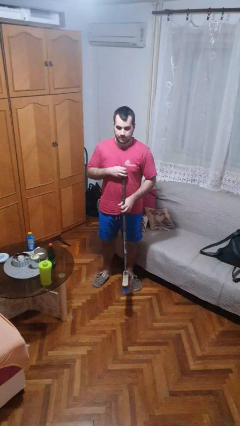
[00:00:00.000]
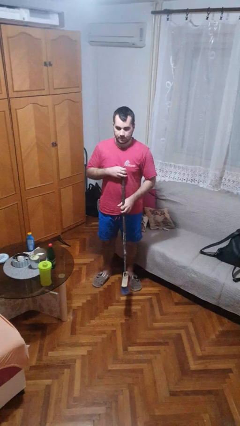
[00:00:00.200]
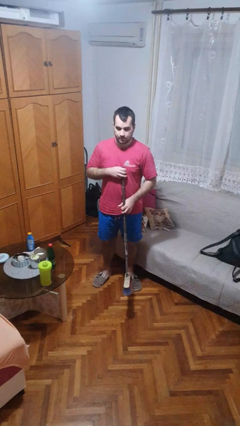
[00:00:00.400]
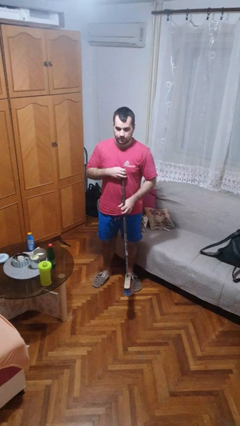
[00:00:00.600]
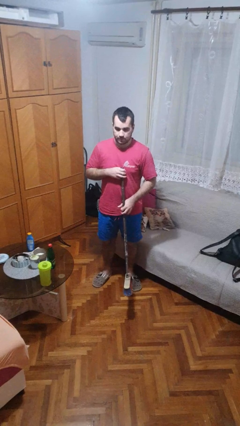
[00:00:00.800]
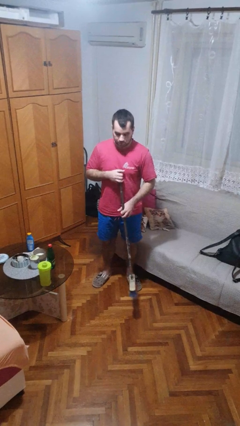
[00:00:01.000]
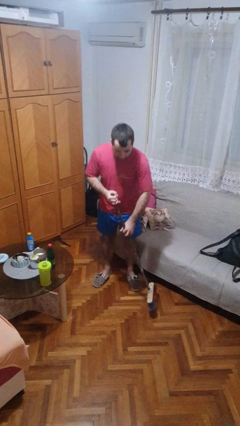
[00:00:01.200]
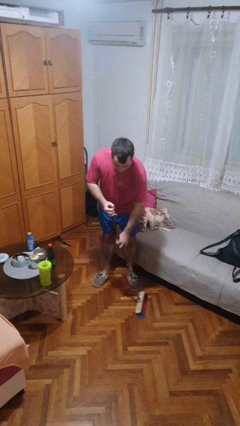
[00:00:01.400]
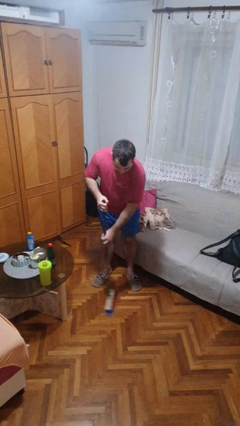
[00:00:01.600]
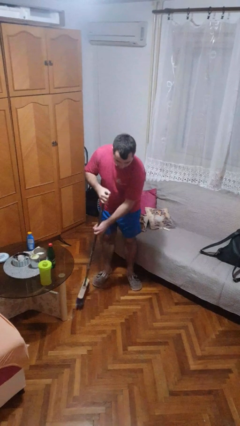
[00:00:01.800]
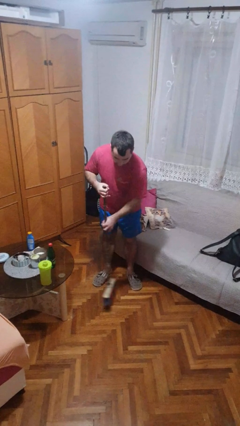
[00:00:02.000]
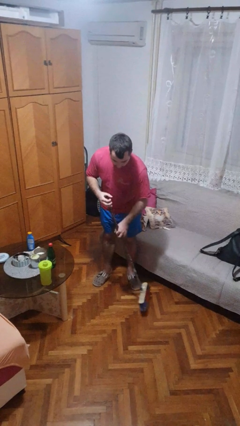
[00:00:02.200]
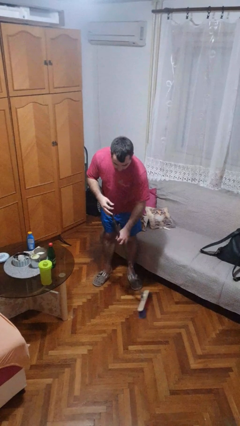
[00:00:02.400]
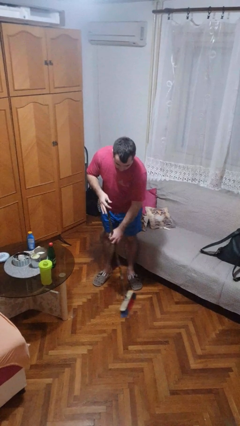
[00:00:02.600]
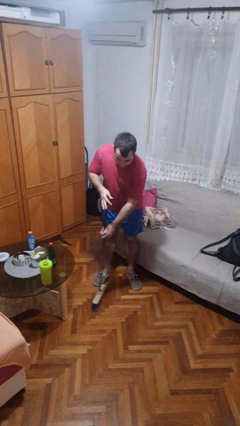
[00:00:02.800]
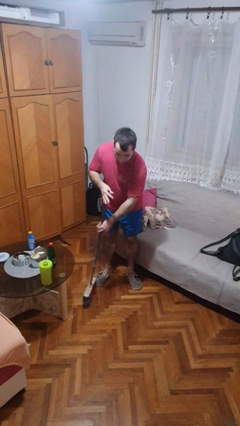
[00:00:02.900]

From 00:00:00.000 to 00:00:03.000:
person sweeps floor

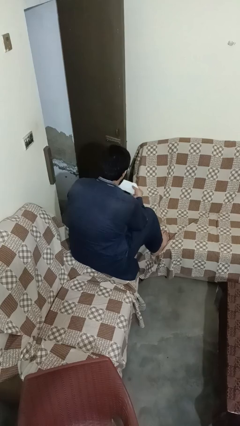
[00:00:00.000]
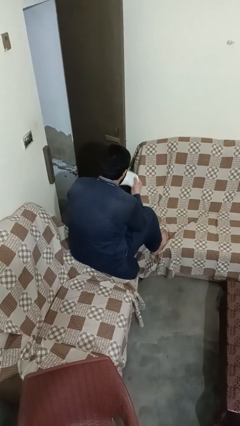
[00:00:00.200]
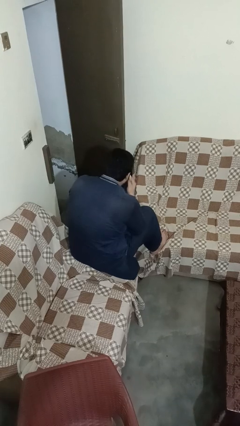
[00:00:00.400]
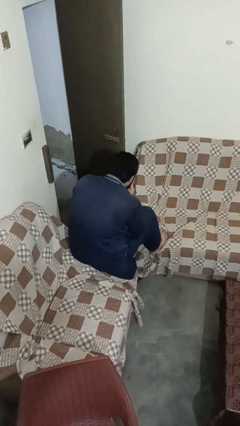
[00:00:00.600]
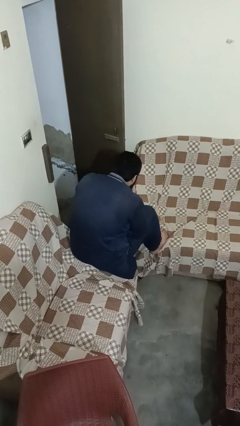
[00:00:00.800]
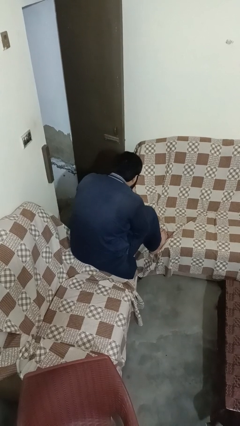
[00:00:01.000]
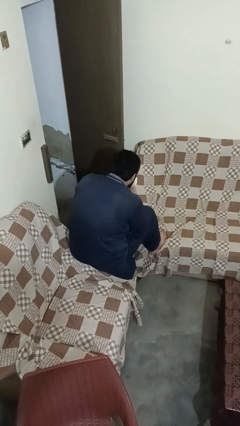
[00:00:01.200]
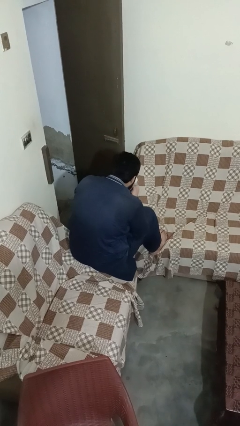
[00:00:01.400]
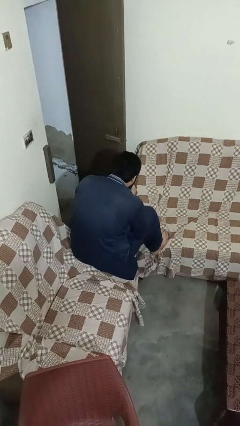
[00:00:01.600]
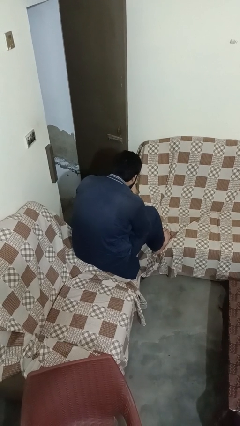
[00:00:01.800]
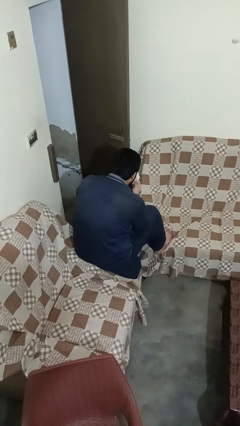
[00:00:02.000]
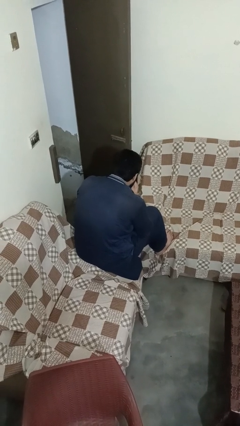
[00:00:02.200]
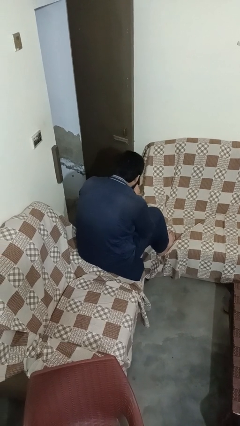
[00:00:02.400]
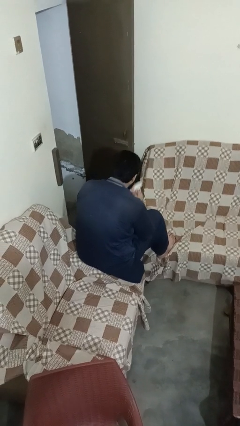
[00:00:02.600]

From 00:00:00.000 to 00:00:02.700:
person blows nose

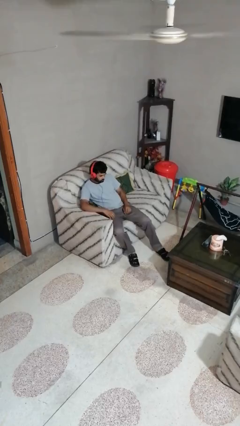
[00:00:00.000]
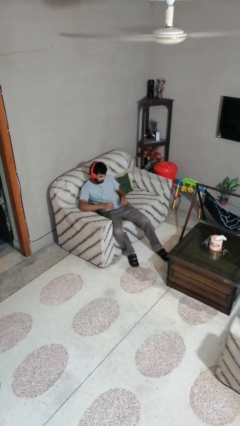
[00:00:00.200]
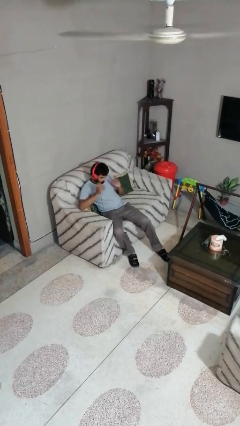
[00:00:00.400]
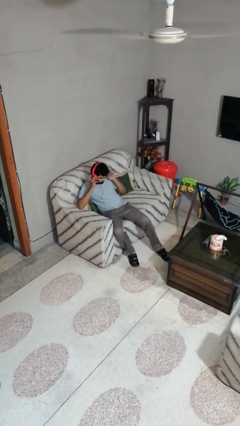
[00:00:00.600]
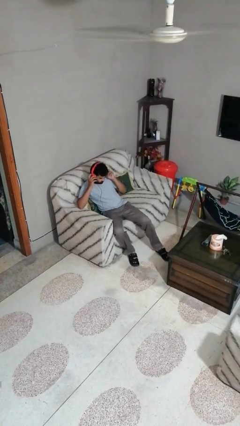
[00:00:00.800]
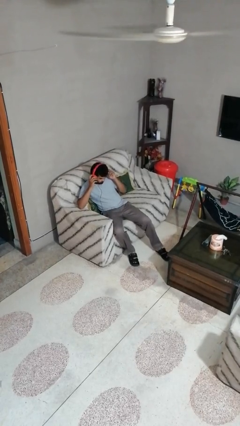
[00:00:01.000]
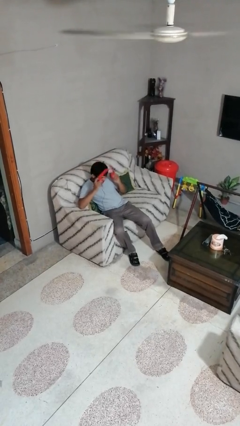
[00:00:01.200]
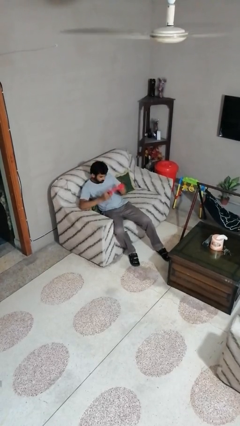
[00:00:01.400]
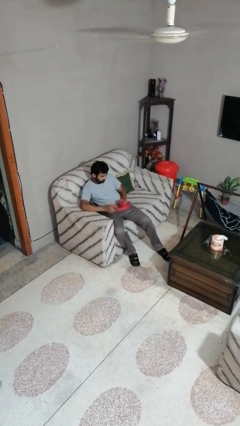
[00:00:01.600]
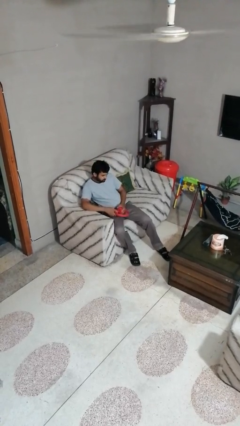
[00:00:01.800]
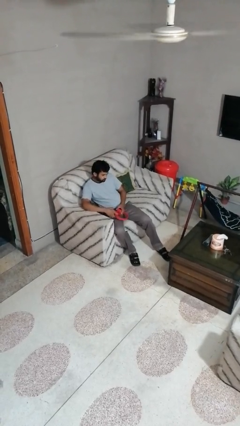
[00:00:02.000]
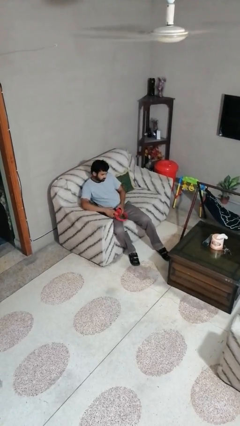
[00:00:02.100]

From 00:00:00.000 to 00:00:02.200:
person takes off headphones

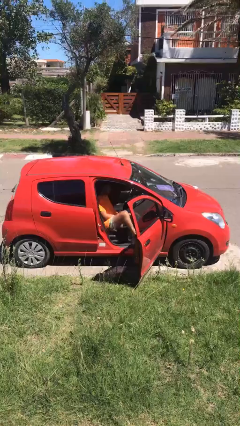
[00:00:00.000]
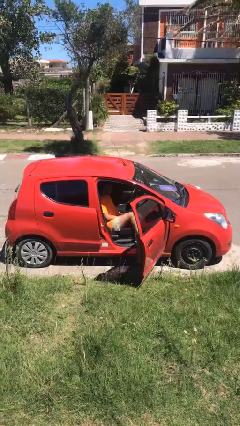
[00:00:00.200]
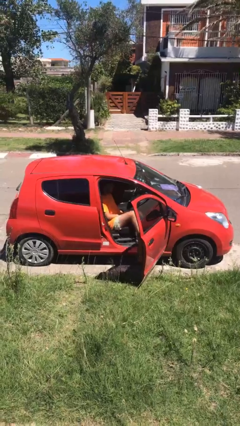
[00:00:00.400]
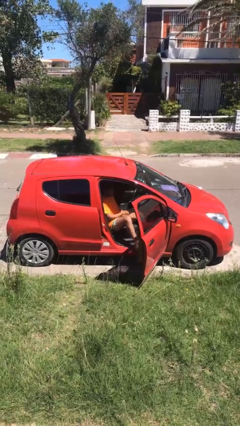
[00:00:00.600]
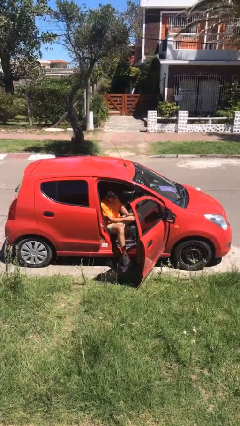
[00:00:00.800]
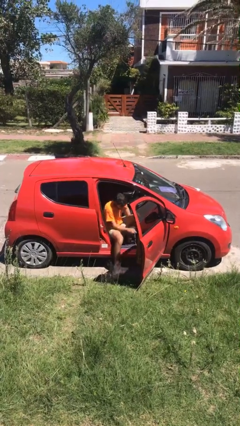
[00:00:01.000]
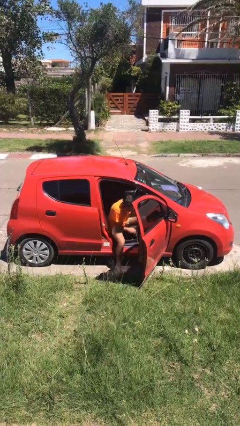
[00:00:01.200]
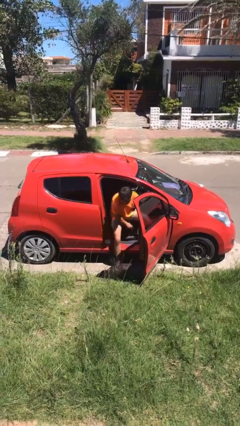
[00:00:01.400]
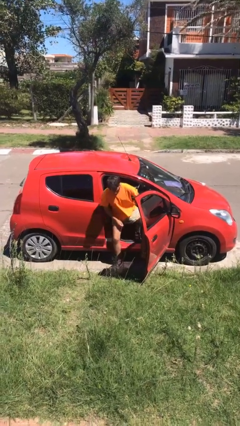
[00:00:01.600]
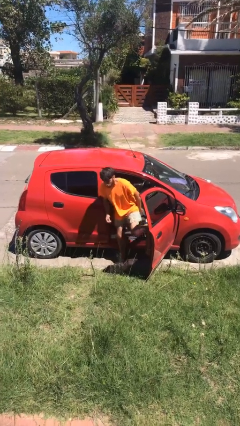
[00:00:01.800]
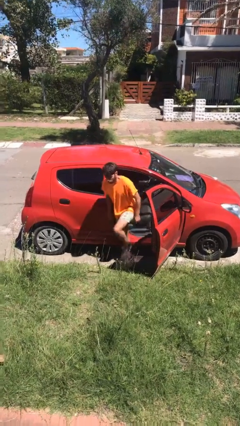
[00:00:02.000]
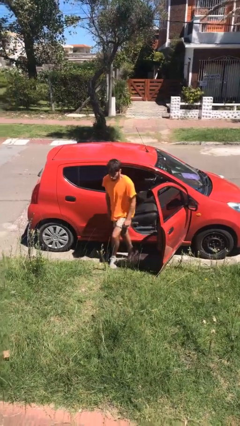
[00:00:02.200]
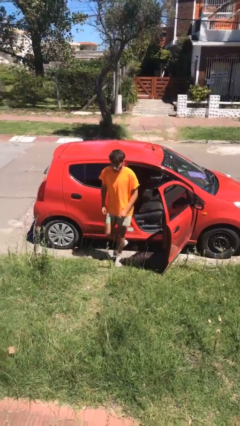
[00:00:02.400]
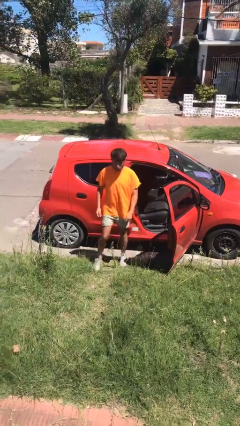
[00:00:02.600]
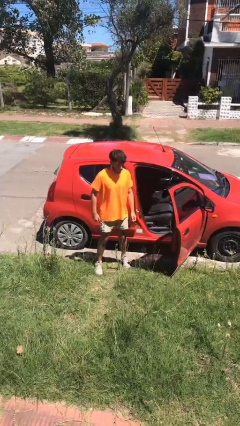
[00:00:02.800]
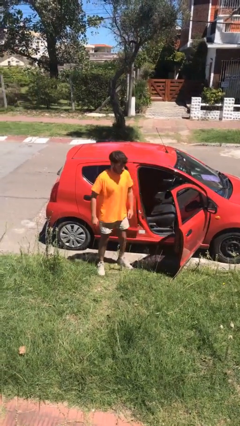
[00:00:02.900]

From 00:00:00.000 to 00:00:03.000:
person exits car

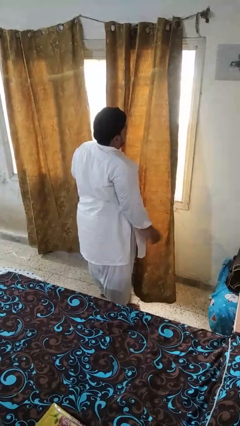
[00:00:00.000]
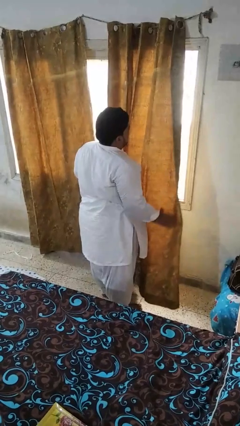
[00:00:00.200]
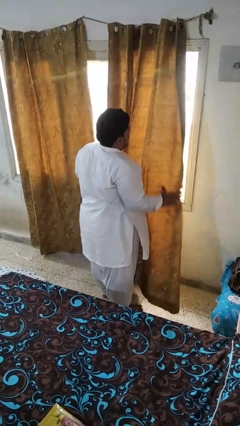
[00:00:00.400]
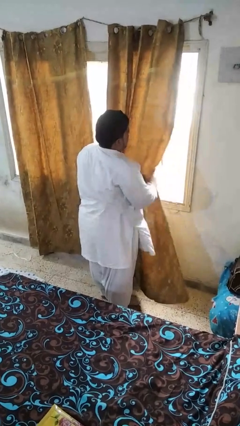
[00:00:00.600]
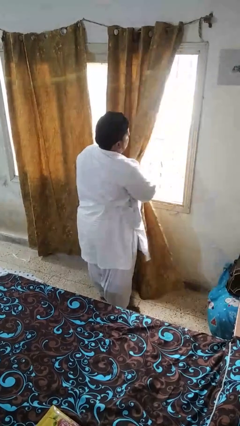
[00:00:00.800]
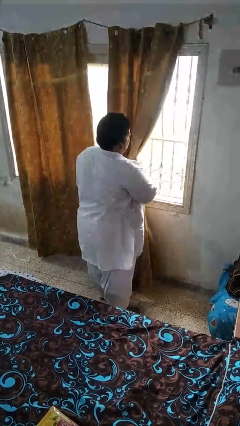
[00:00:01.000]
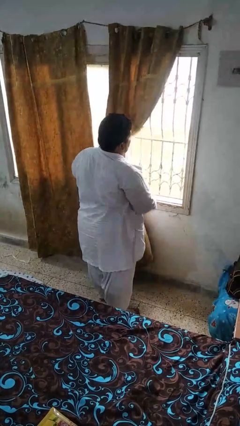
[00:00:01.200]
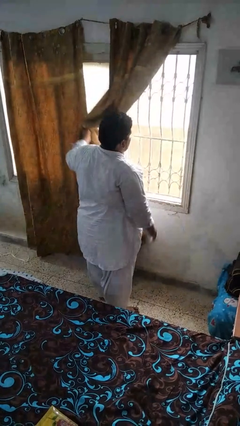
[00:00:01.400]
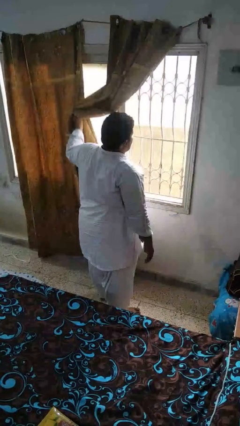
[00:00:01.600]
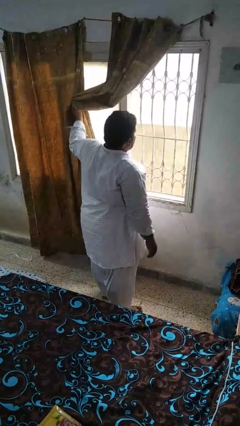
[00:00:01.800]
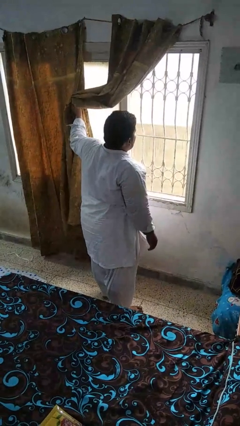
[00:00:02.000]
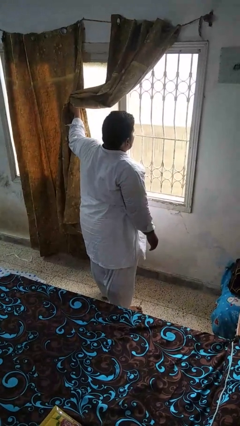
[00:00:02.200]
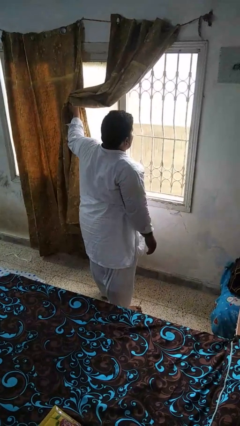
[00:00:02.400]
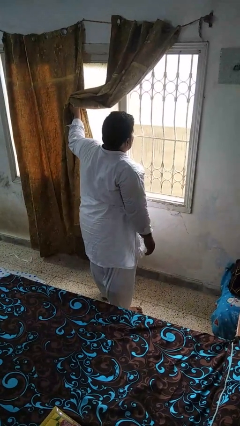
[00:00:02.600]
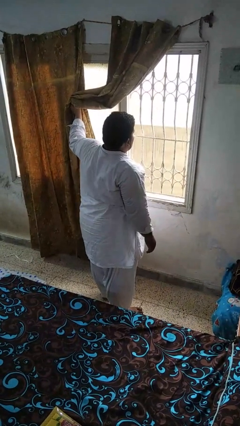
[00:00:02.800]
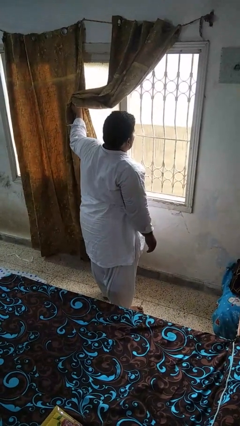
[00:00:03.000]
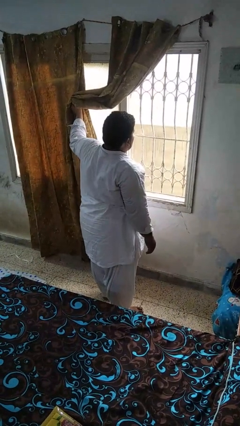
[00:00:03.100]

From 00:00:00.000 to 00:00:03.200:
person opens curtains

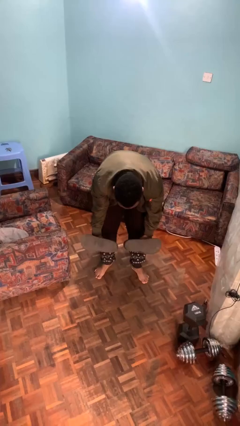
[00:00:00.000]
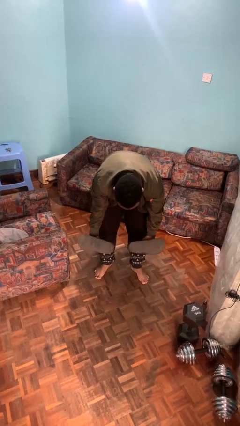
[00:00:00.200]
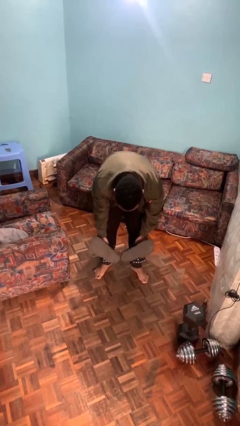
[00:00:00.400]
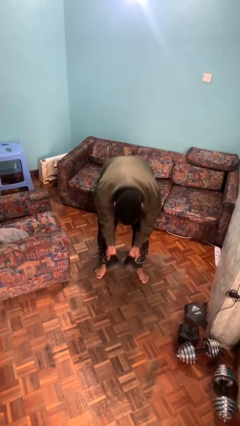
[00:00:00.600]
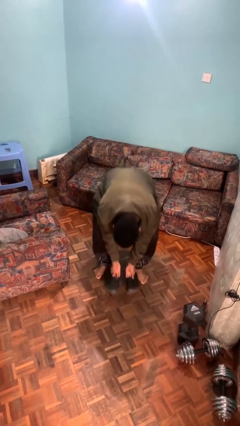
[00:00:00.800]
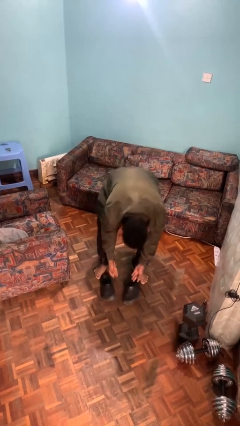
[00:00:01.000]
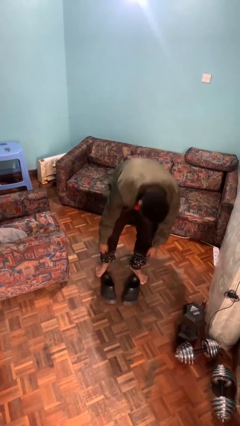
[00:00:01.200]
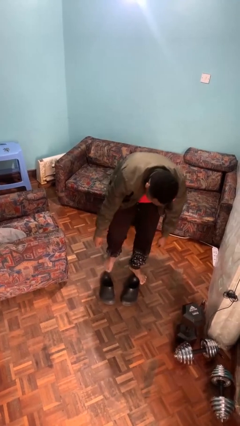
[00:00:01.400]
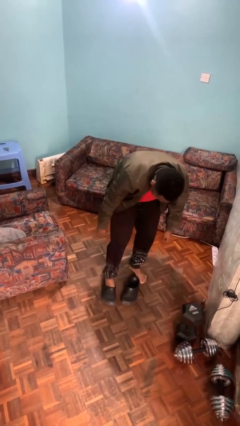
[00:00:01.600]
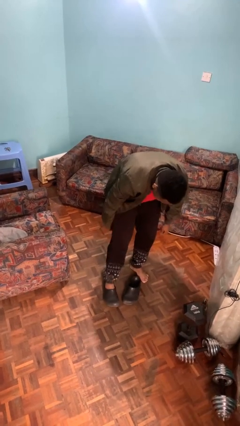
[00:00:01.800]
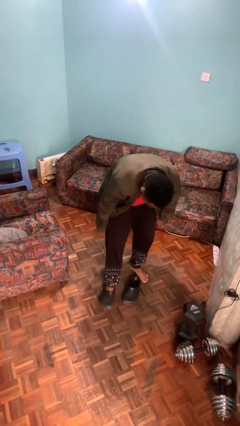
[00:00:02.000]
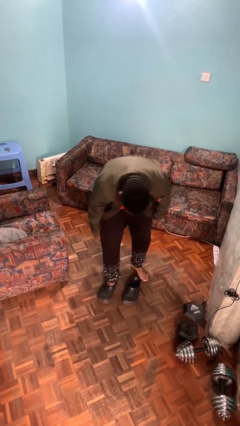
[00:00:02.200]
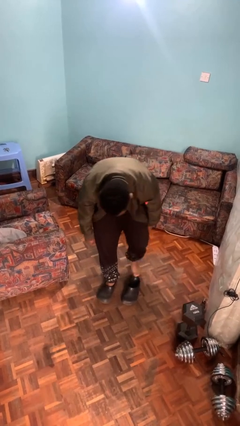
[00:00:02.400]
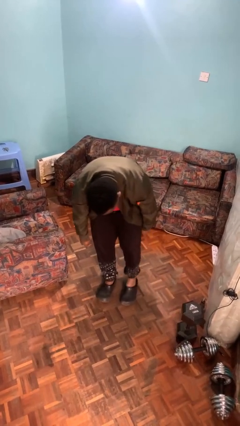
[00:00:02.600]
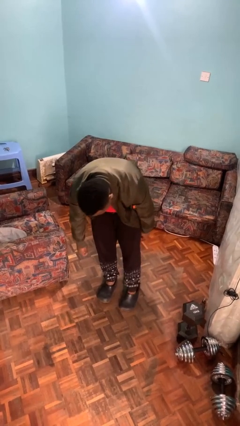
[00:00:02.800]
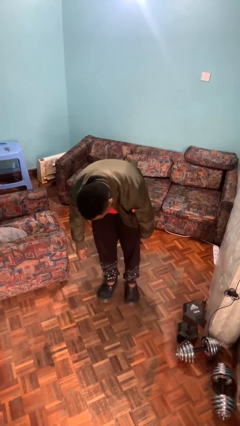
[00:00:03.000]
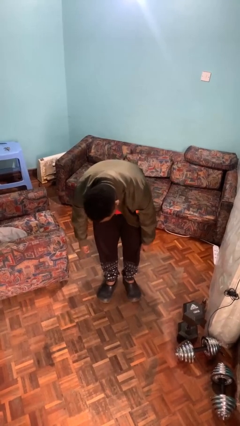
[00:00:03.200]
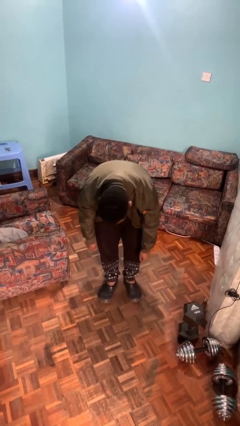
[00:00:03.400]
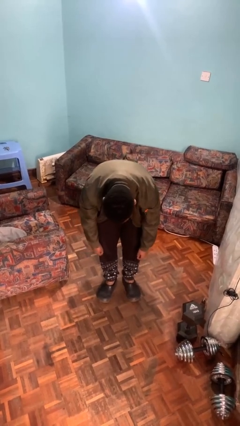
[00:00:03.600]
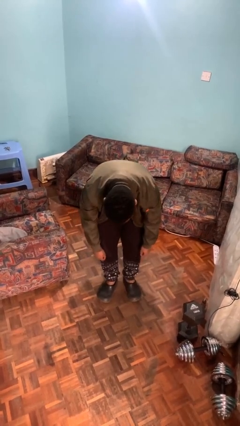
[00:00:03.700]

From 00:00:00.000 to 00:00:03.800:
person puts on shoes
